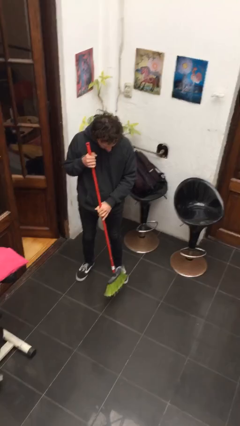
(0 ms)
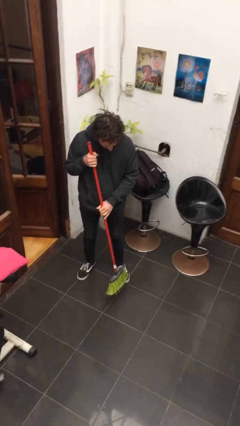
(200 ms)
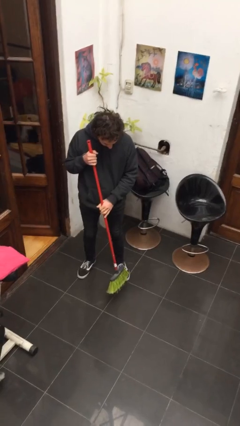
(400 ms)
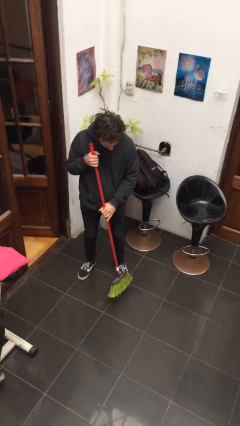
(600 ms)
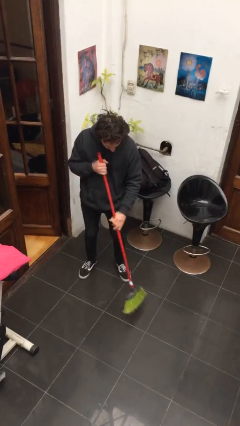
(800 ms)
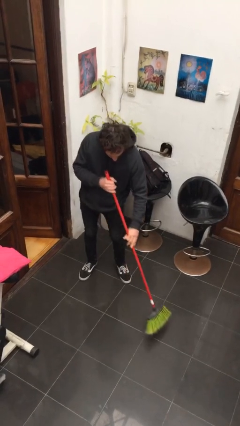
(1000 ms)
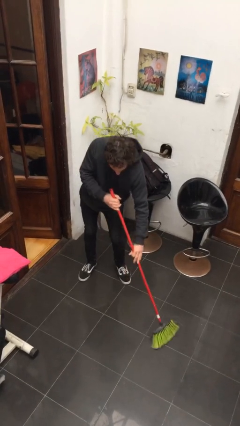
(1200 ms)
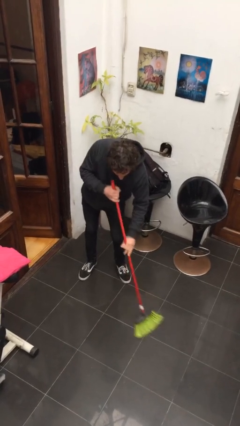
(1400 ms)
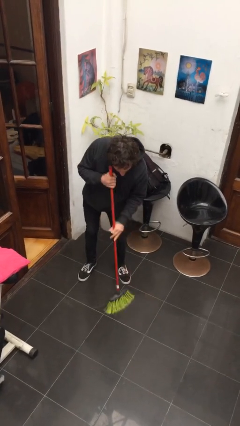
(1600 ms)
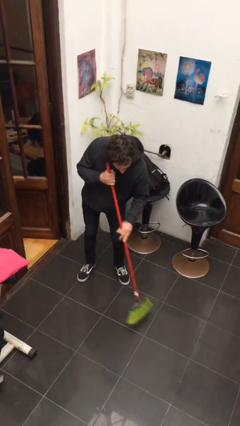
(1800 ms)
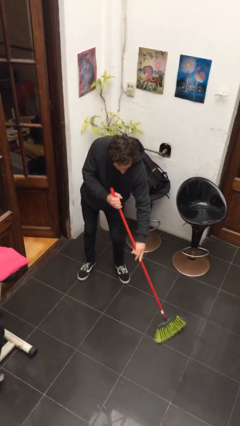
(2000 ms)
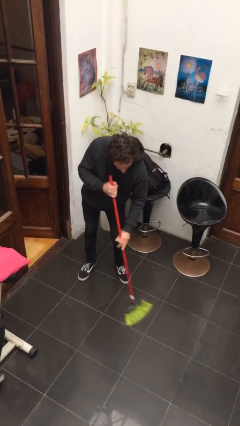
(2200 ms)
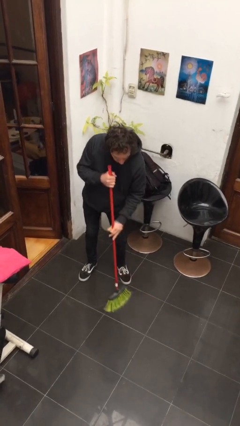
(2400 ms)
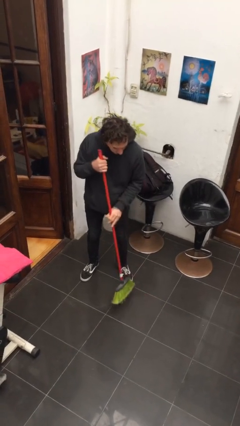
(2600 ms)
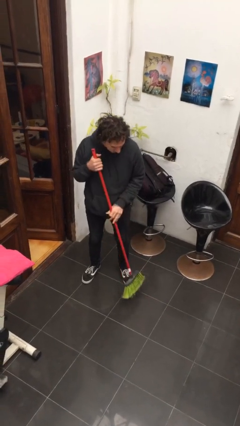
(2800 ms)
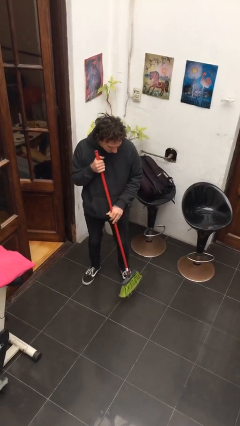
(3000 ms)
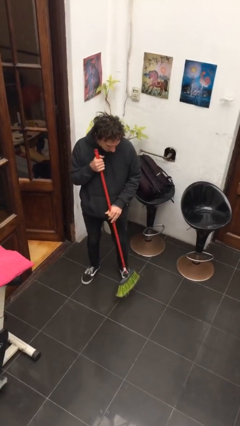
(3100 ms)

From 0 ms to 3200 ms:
person sweeps floor

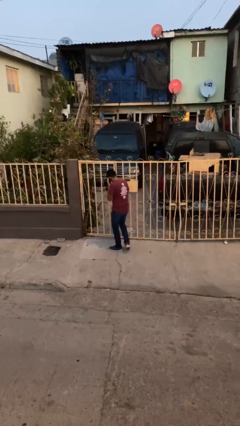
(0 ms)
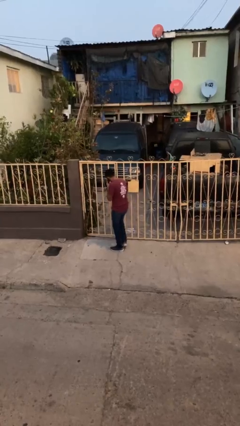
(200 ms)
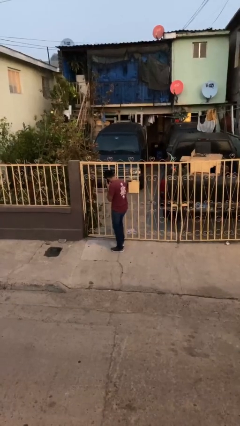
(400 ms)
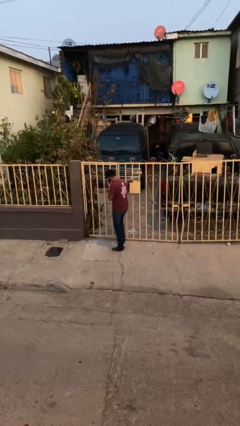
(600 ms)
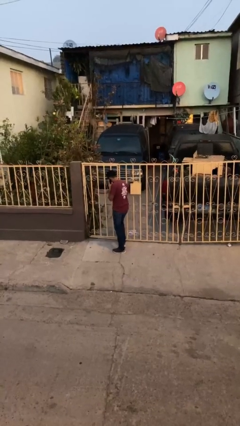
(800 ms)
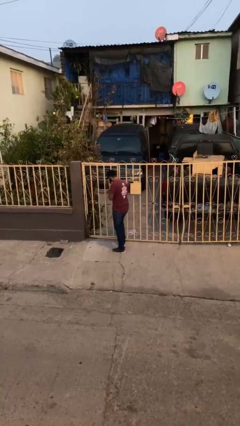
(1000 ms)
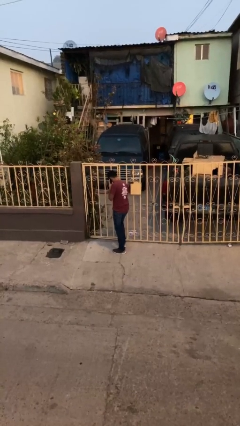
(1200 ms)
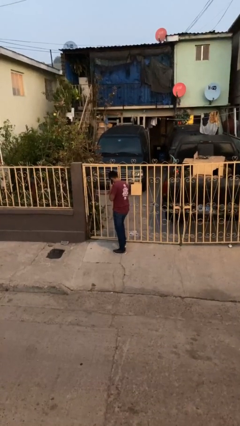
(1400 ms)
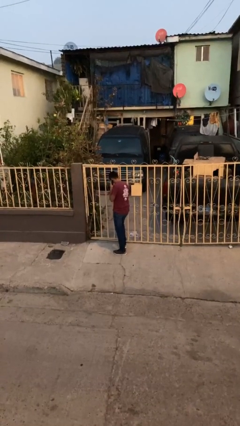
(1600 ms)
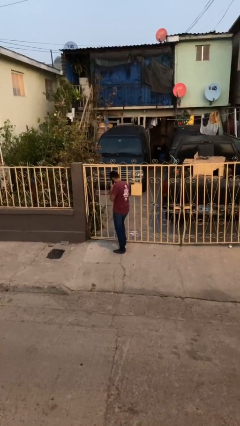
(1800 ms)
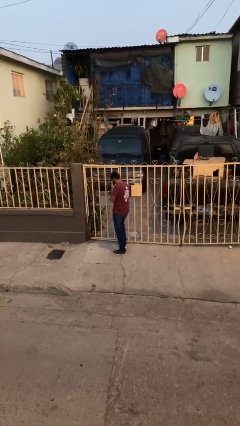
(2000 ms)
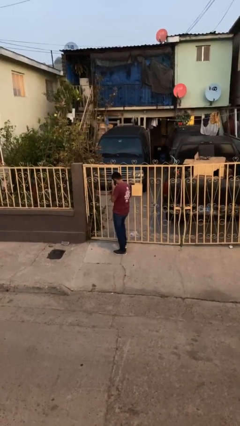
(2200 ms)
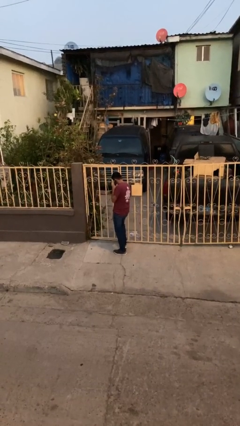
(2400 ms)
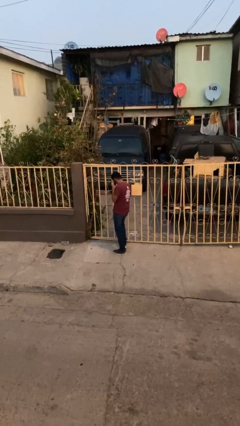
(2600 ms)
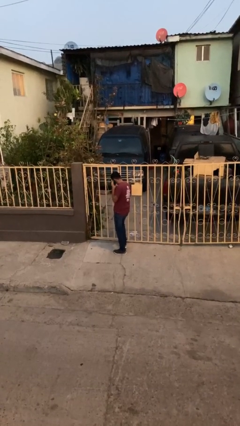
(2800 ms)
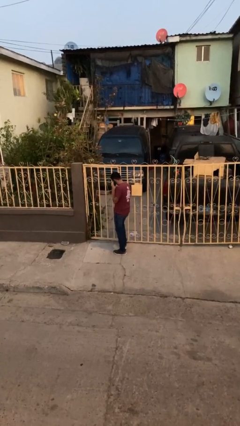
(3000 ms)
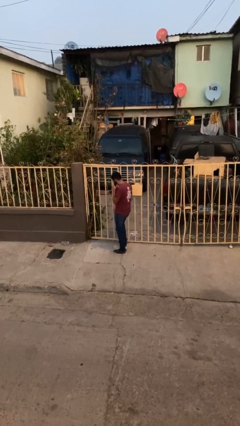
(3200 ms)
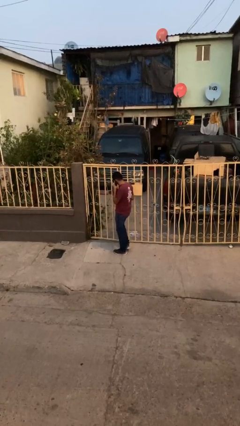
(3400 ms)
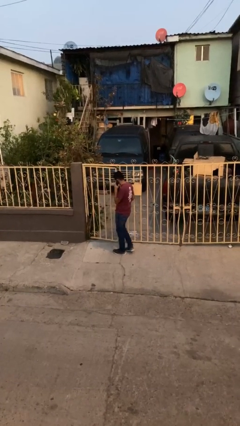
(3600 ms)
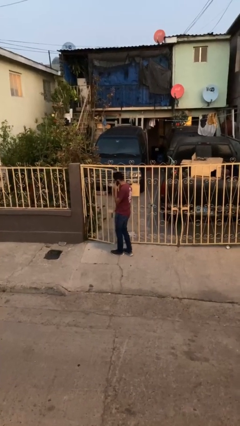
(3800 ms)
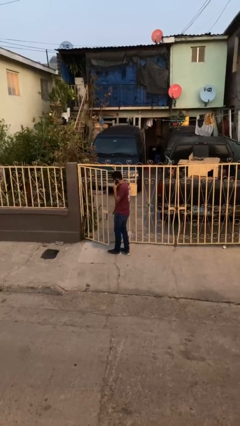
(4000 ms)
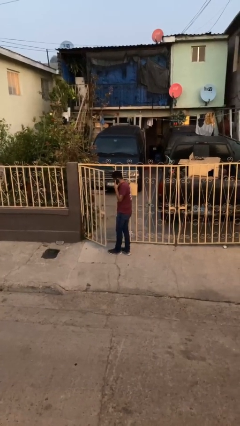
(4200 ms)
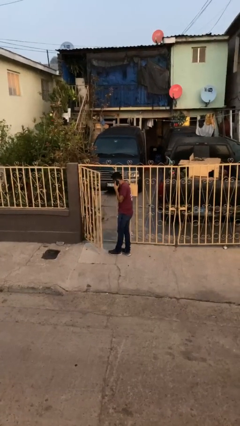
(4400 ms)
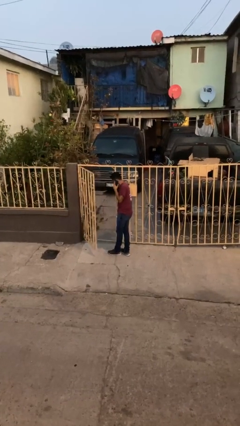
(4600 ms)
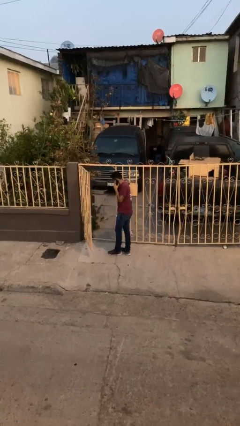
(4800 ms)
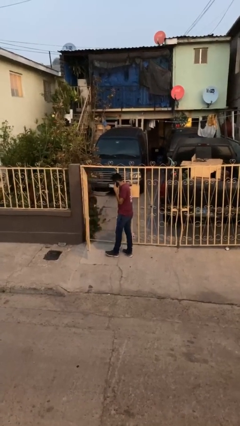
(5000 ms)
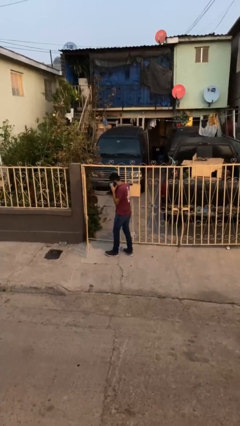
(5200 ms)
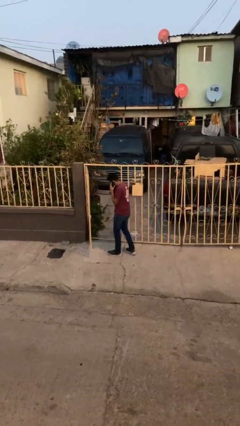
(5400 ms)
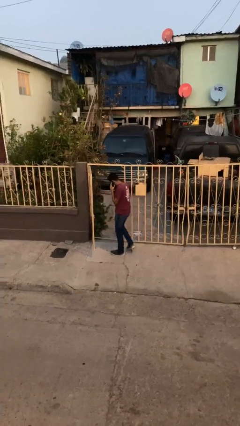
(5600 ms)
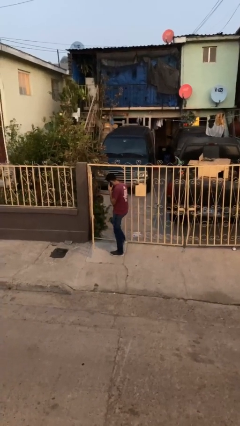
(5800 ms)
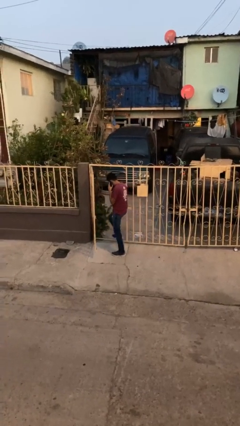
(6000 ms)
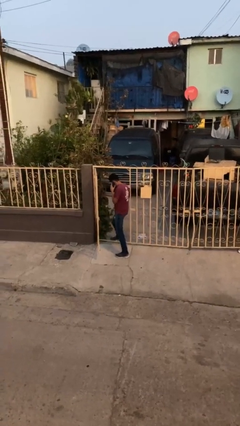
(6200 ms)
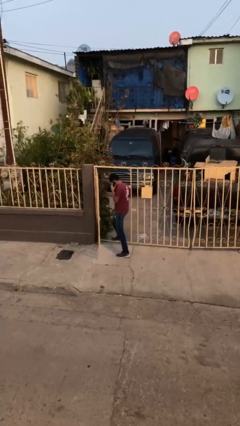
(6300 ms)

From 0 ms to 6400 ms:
person opens facility door

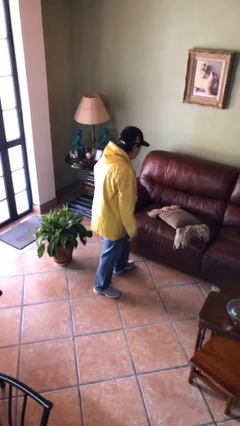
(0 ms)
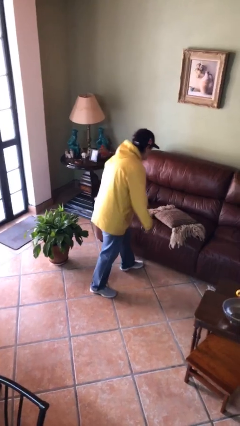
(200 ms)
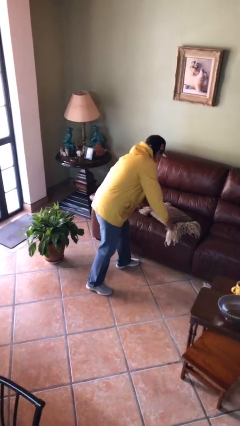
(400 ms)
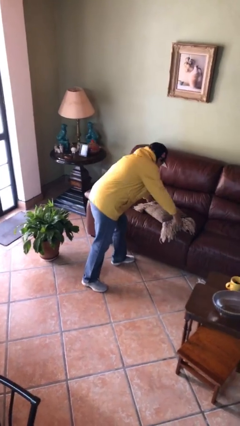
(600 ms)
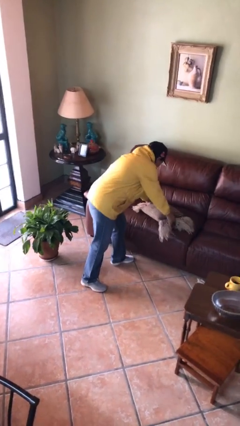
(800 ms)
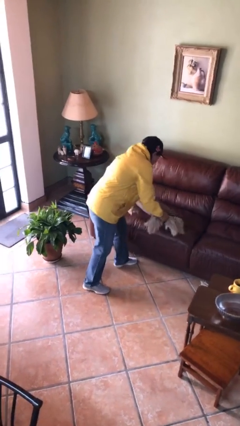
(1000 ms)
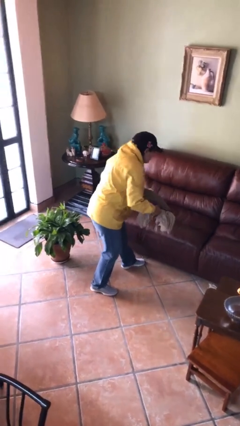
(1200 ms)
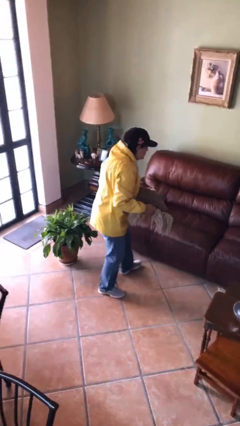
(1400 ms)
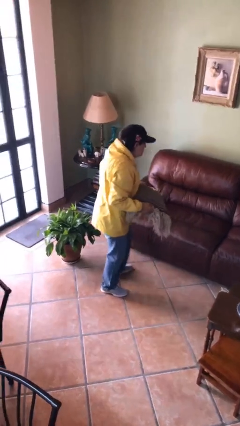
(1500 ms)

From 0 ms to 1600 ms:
person picks up object from couch

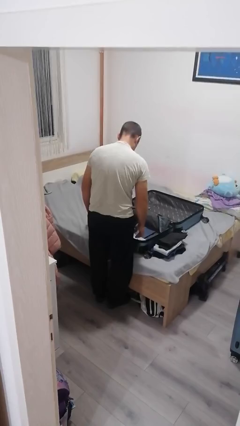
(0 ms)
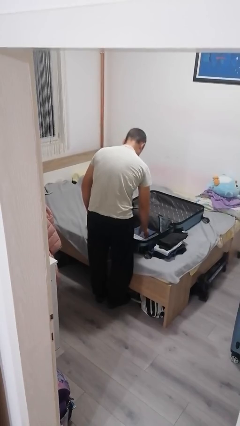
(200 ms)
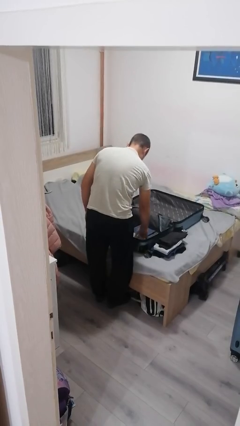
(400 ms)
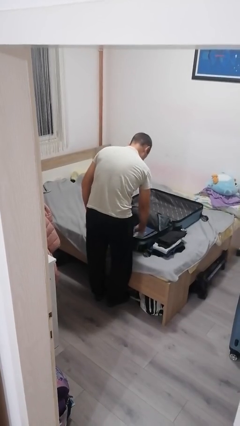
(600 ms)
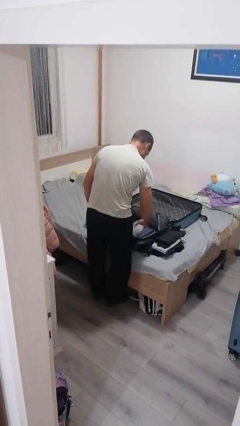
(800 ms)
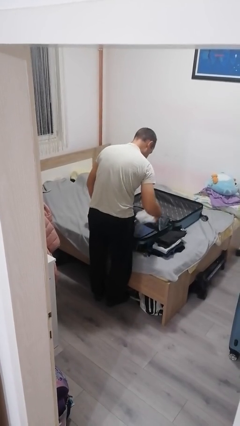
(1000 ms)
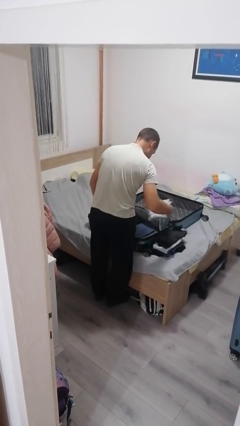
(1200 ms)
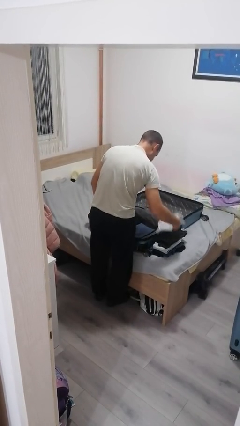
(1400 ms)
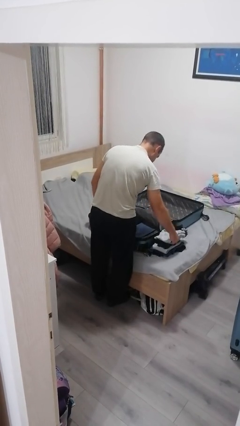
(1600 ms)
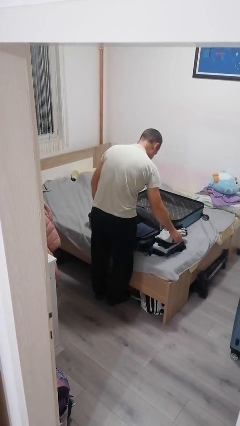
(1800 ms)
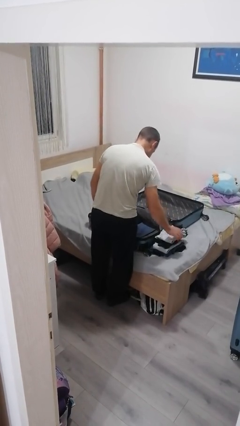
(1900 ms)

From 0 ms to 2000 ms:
person unloads clothes from suitcase

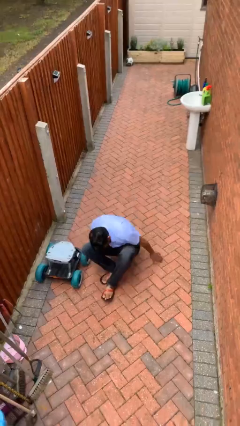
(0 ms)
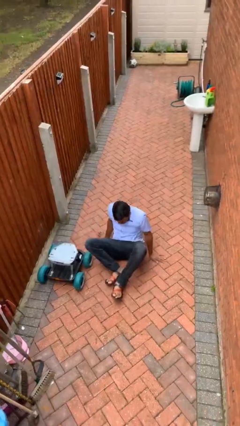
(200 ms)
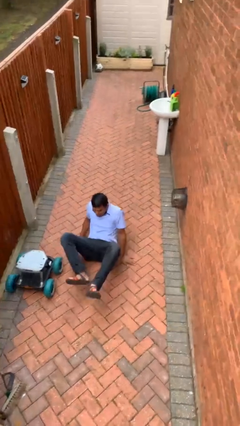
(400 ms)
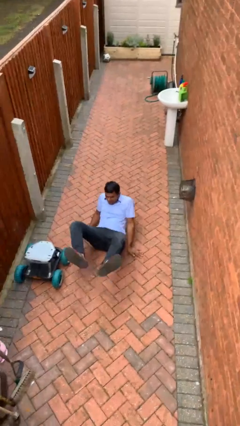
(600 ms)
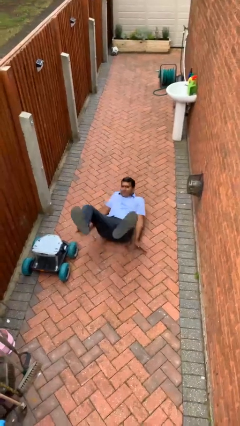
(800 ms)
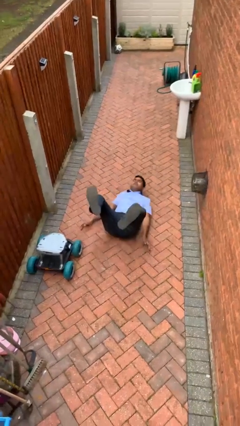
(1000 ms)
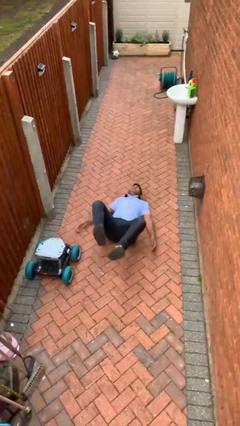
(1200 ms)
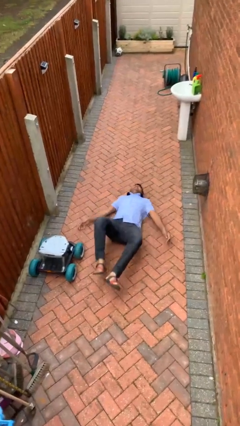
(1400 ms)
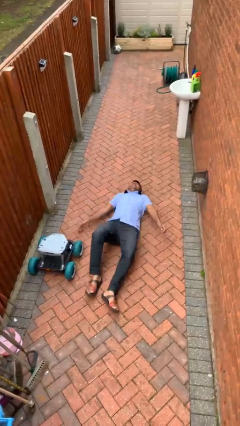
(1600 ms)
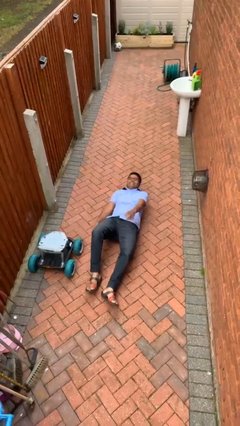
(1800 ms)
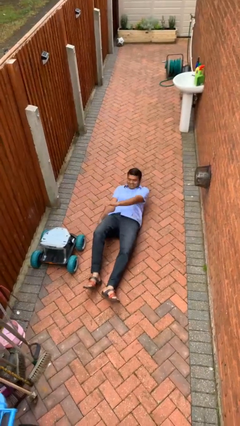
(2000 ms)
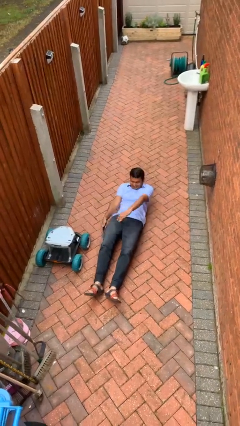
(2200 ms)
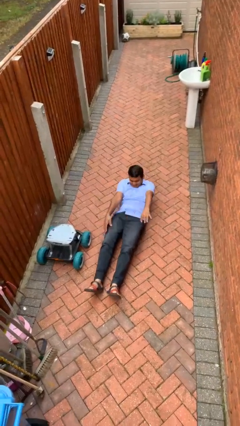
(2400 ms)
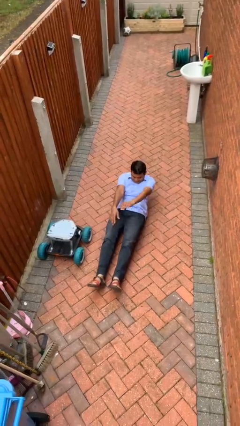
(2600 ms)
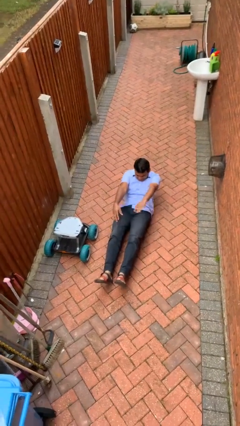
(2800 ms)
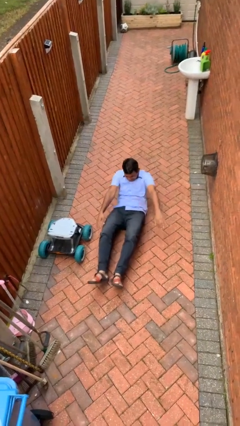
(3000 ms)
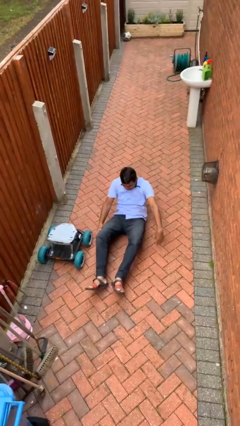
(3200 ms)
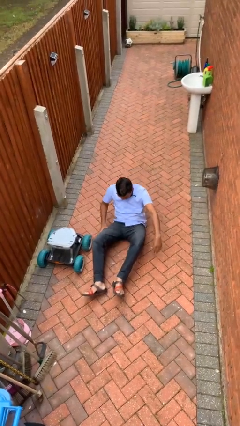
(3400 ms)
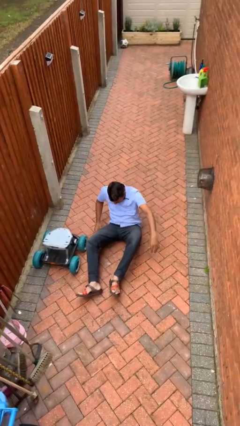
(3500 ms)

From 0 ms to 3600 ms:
person lies down on floor

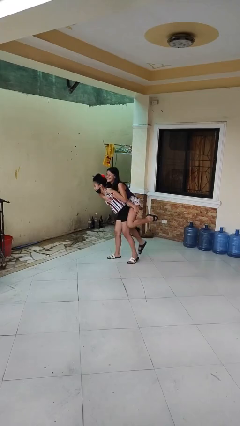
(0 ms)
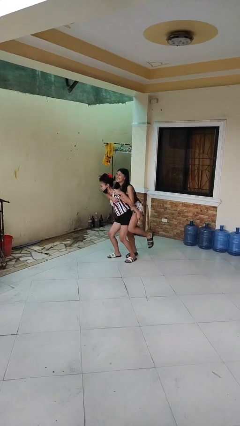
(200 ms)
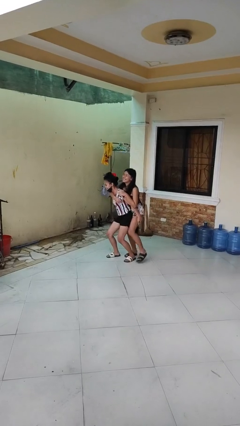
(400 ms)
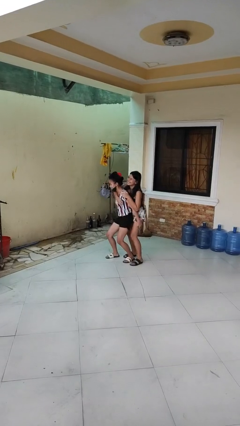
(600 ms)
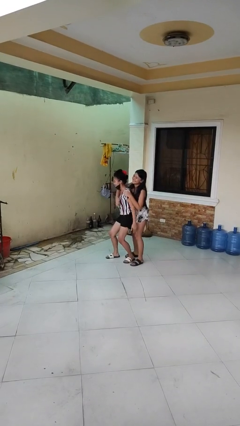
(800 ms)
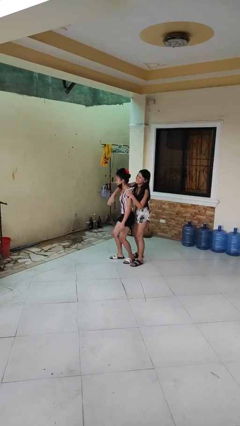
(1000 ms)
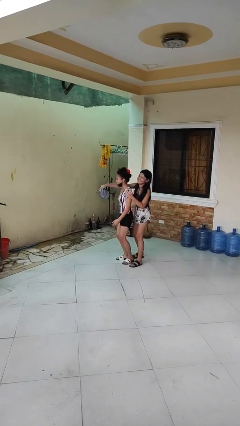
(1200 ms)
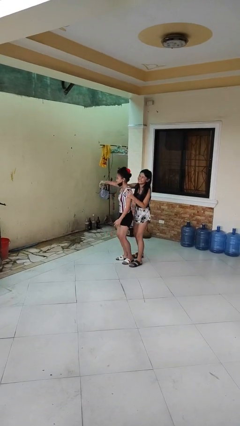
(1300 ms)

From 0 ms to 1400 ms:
person puts down person
